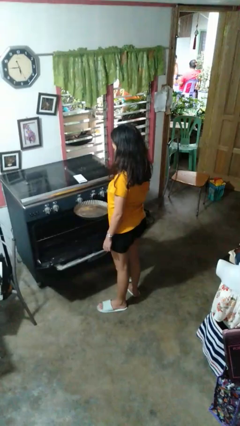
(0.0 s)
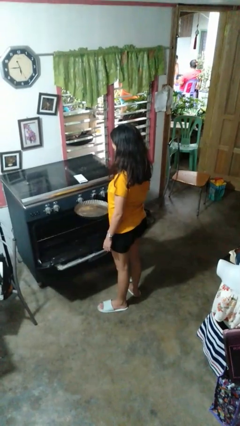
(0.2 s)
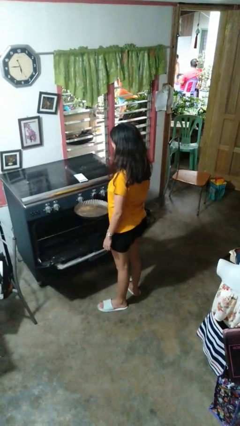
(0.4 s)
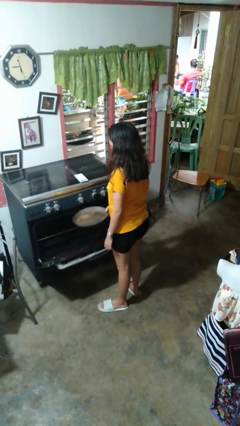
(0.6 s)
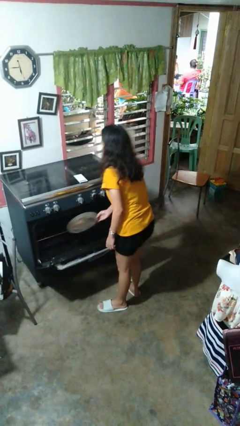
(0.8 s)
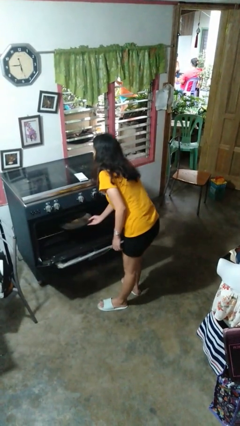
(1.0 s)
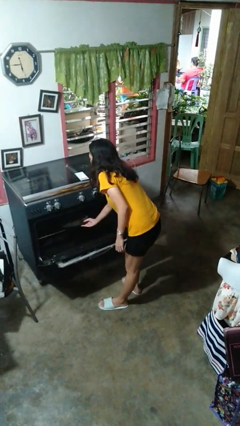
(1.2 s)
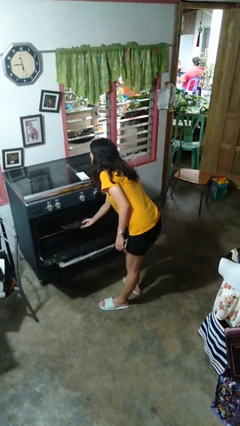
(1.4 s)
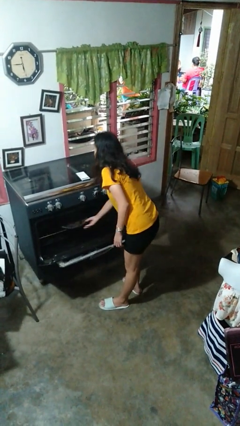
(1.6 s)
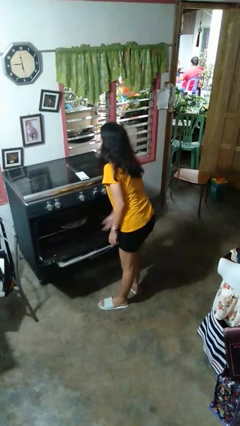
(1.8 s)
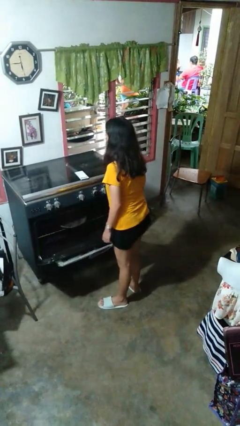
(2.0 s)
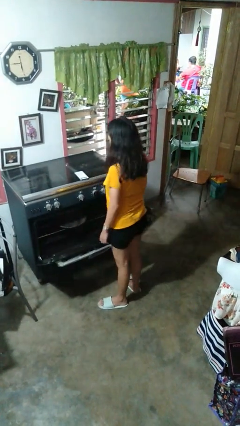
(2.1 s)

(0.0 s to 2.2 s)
person puts object into oven

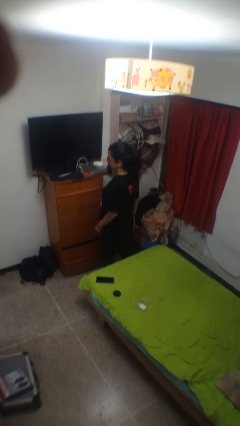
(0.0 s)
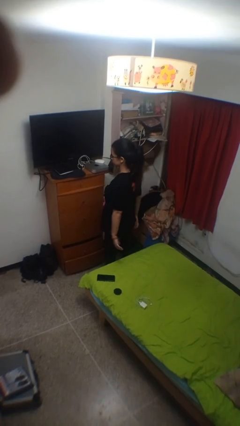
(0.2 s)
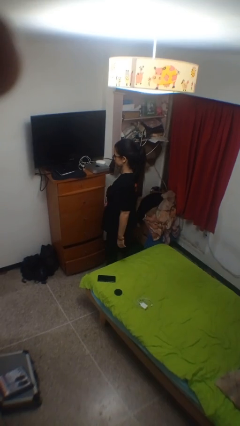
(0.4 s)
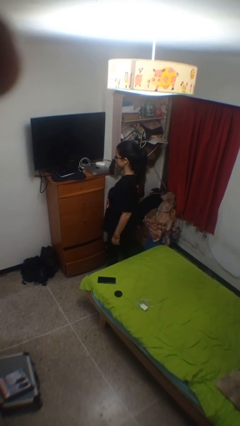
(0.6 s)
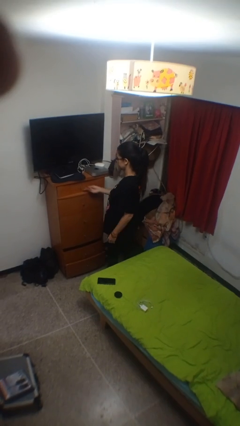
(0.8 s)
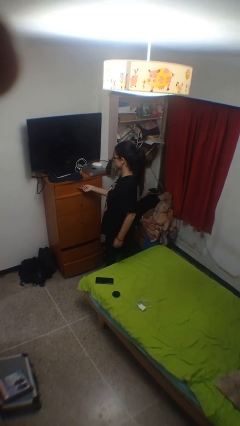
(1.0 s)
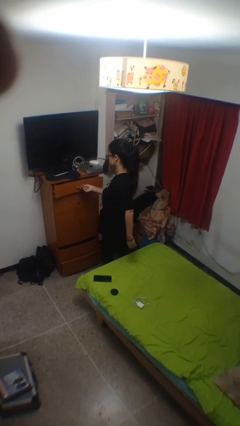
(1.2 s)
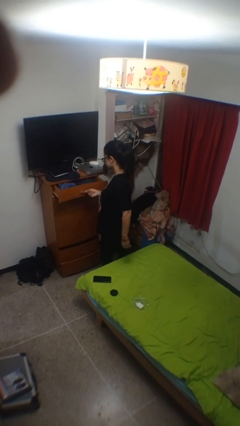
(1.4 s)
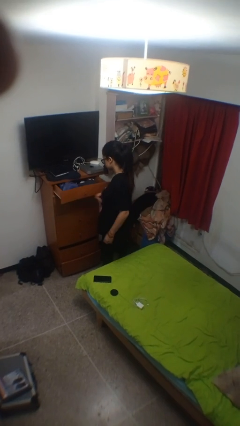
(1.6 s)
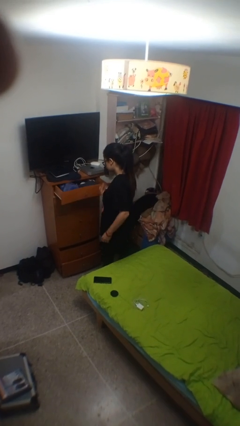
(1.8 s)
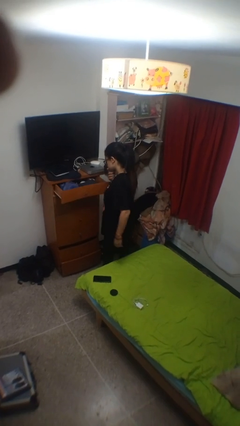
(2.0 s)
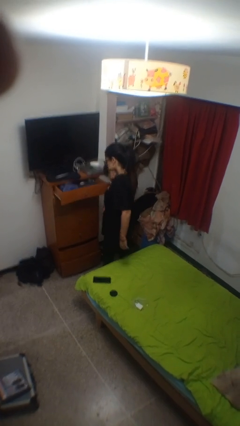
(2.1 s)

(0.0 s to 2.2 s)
person opens dresser drawer

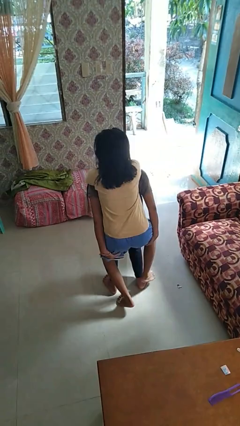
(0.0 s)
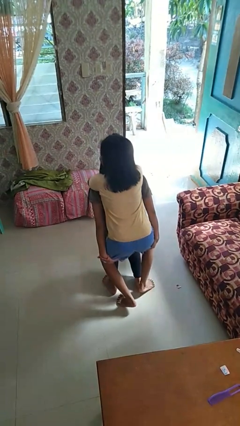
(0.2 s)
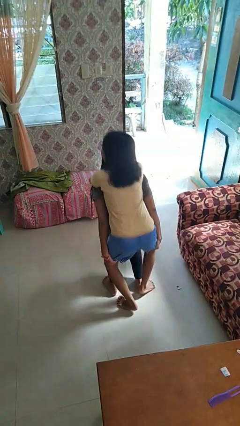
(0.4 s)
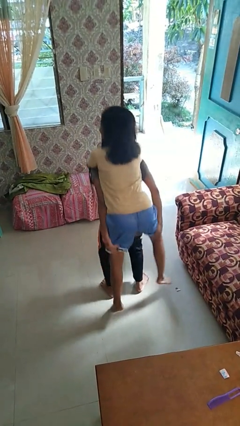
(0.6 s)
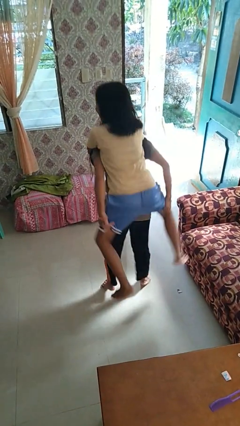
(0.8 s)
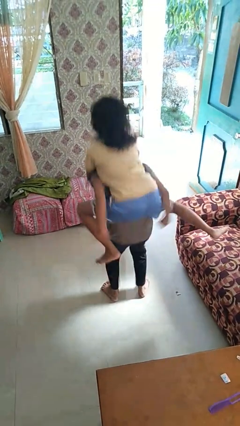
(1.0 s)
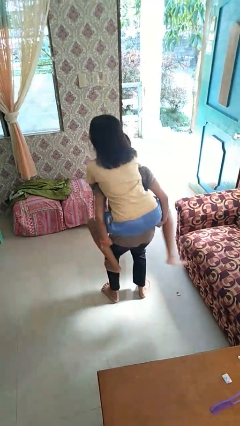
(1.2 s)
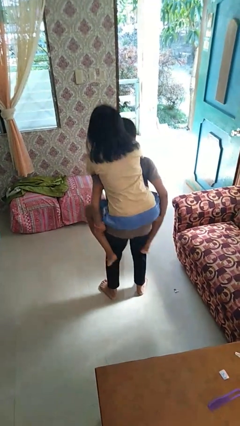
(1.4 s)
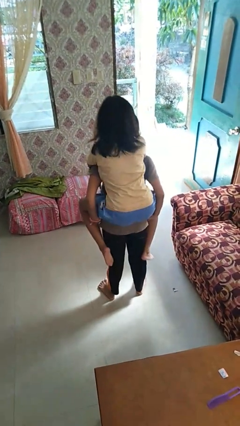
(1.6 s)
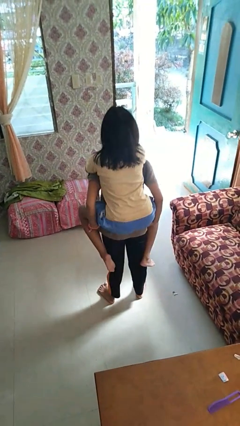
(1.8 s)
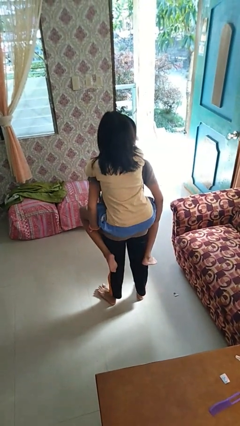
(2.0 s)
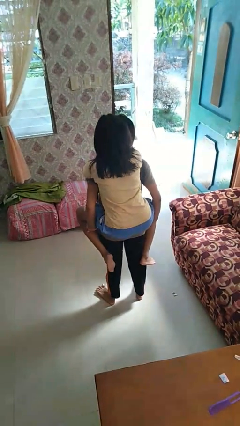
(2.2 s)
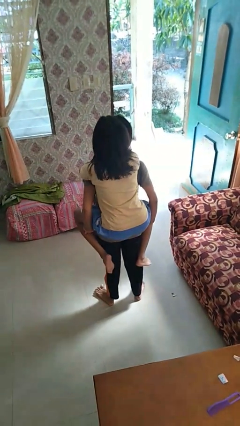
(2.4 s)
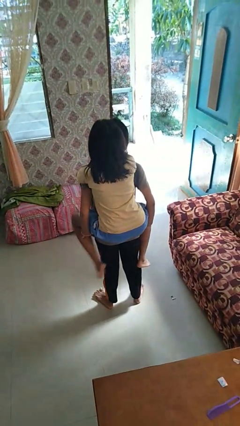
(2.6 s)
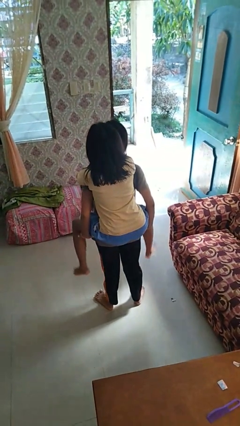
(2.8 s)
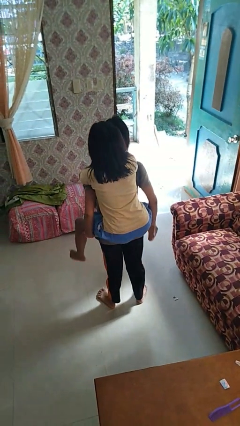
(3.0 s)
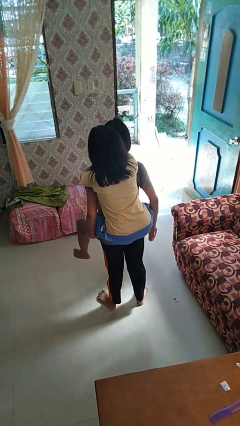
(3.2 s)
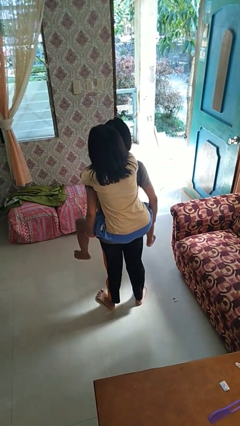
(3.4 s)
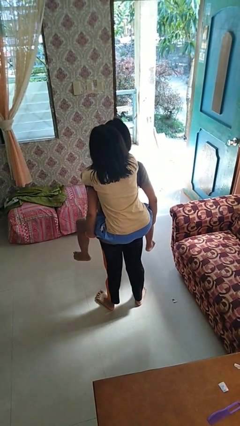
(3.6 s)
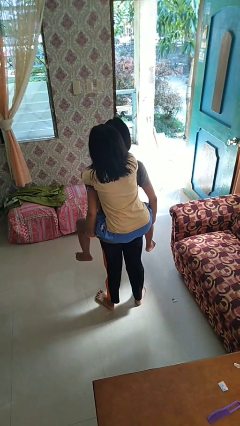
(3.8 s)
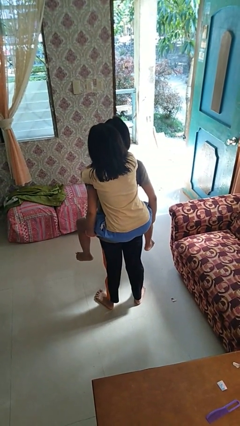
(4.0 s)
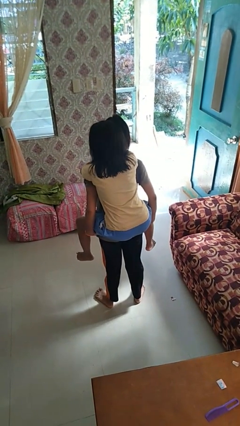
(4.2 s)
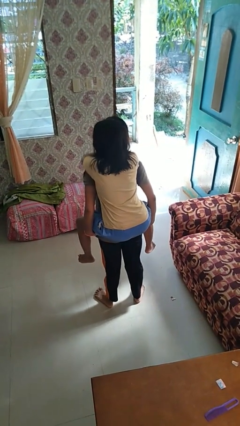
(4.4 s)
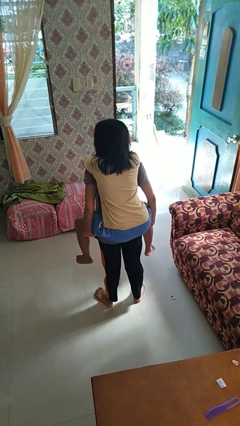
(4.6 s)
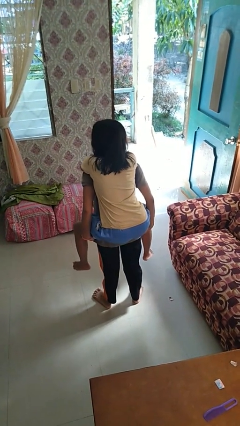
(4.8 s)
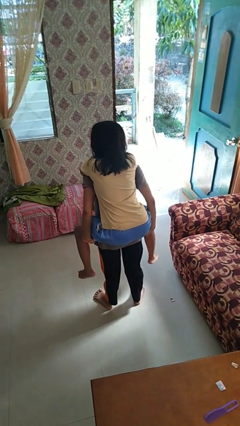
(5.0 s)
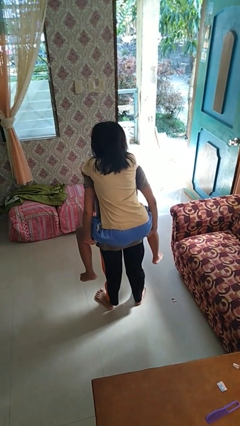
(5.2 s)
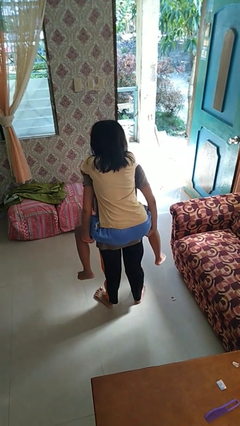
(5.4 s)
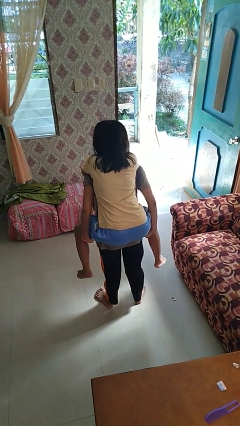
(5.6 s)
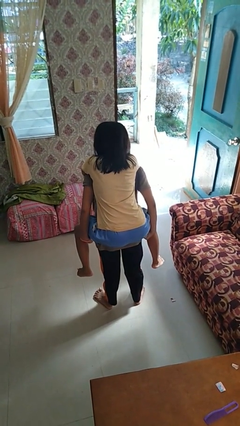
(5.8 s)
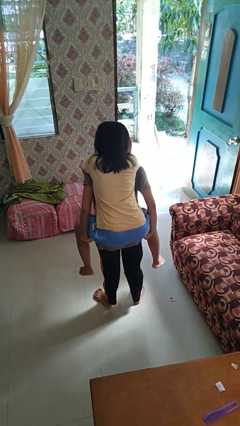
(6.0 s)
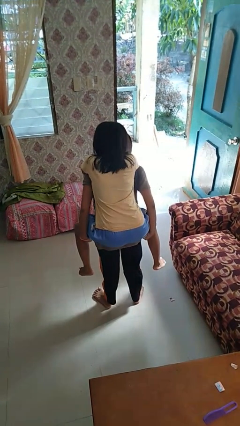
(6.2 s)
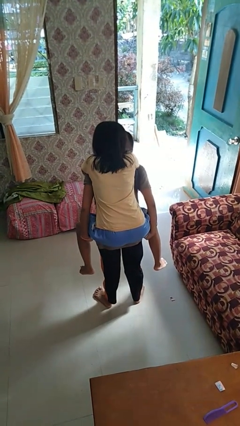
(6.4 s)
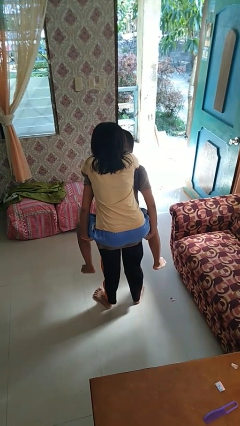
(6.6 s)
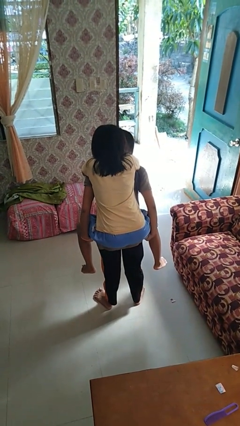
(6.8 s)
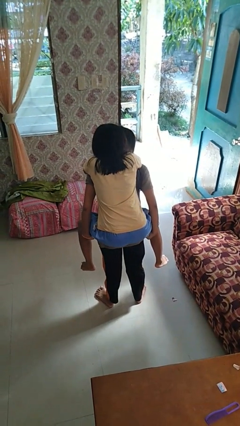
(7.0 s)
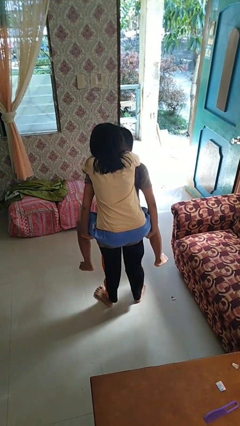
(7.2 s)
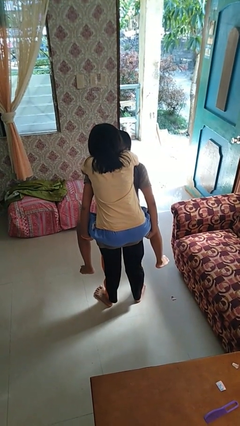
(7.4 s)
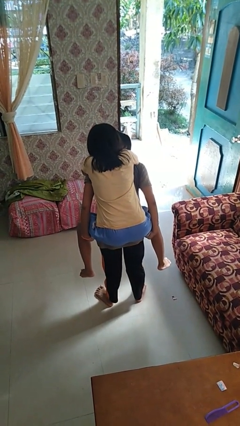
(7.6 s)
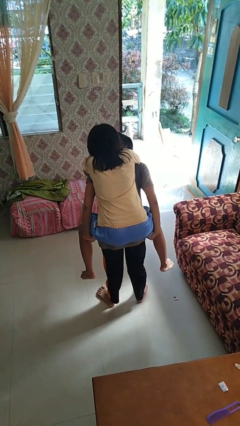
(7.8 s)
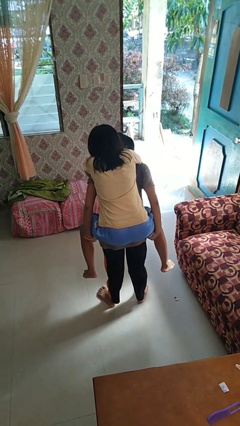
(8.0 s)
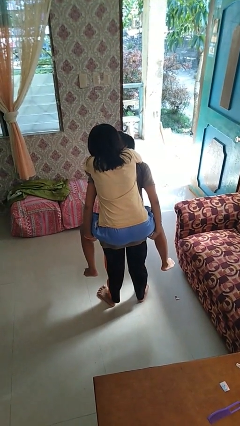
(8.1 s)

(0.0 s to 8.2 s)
person carries person on back

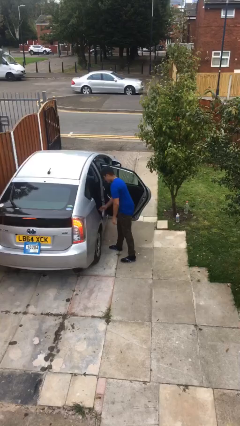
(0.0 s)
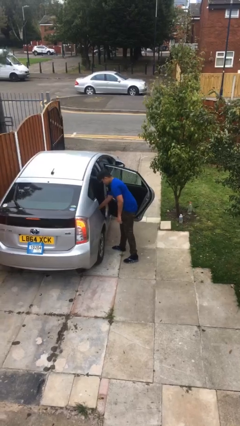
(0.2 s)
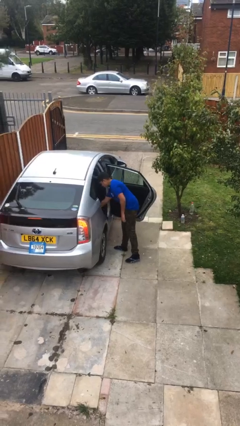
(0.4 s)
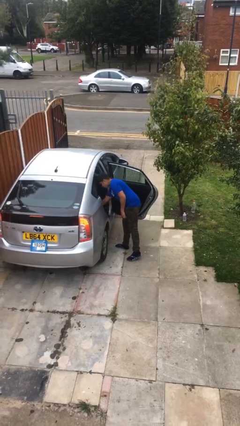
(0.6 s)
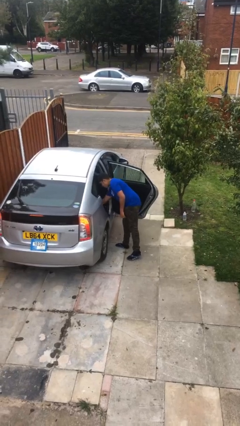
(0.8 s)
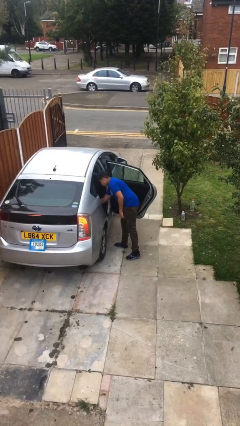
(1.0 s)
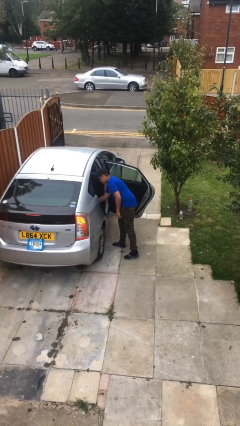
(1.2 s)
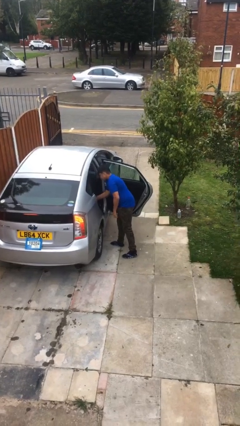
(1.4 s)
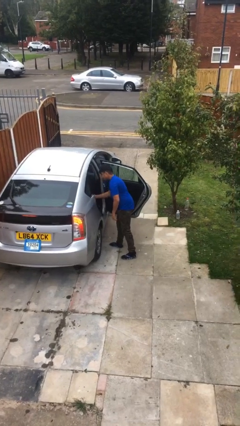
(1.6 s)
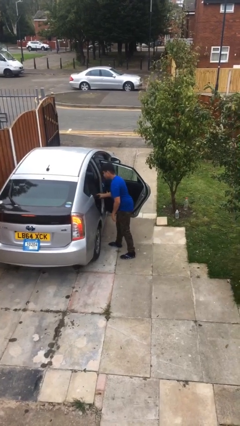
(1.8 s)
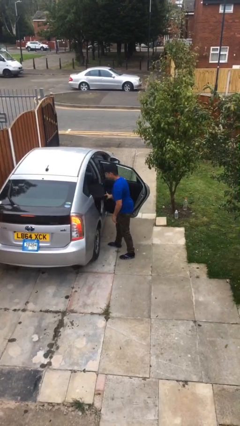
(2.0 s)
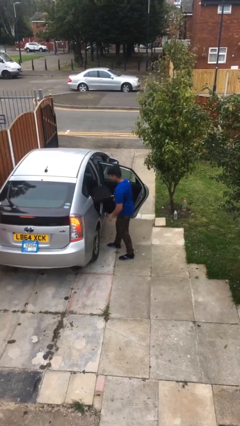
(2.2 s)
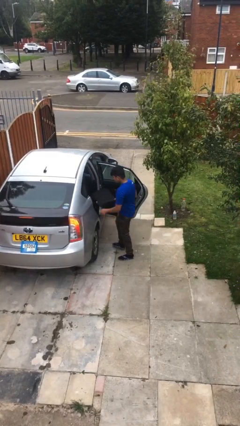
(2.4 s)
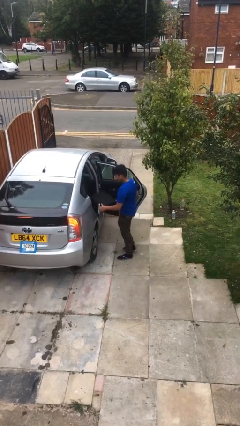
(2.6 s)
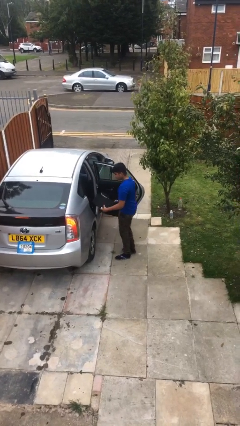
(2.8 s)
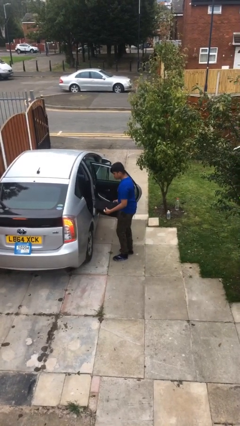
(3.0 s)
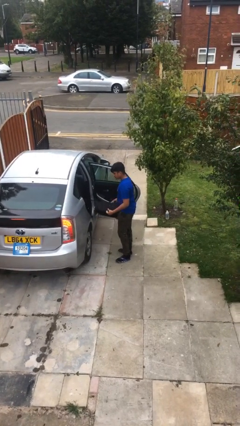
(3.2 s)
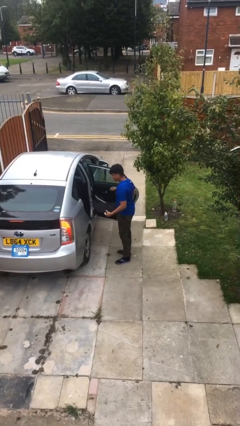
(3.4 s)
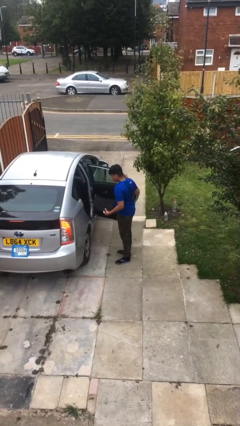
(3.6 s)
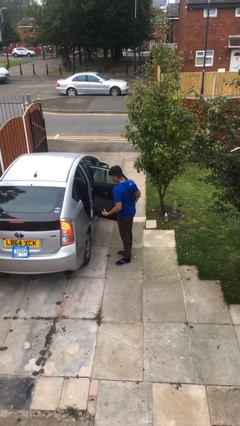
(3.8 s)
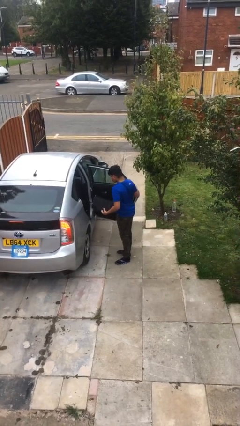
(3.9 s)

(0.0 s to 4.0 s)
person unloads car

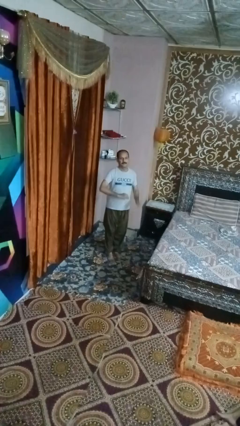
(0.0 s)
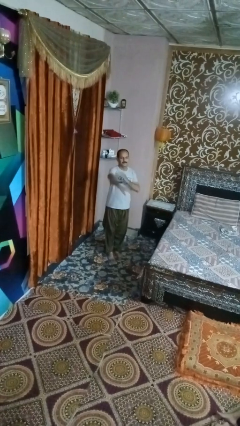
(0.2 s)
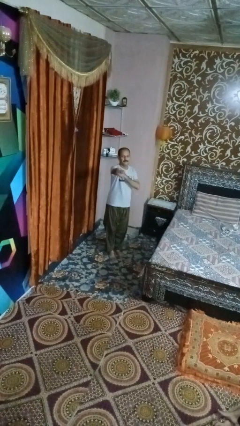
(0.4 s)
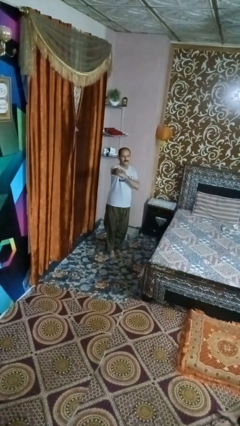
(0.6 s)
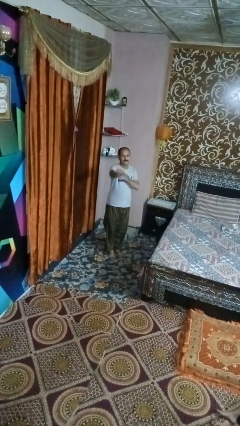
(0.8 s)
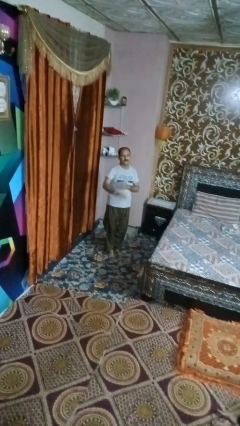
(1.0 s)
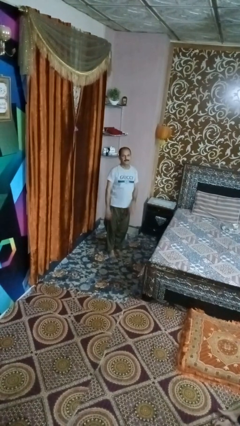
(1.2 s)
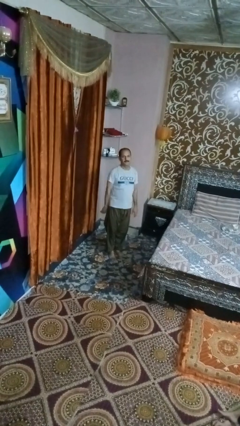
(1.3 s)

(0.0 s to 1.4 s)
person karate chop
